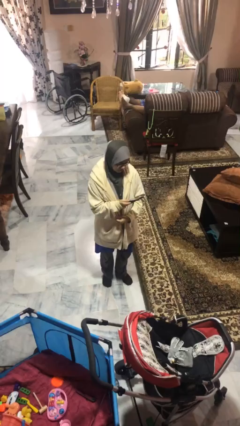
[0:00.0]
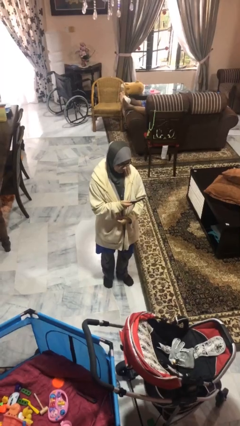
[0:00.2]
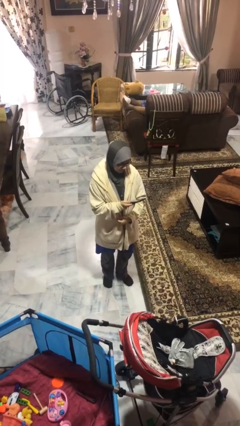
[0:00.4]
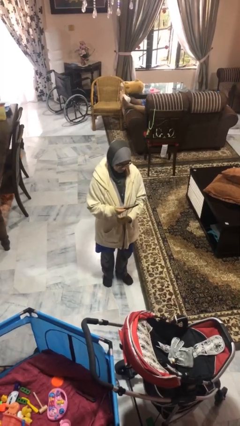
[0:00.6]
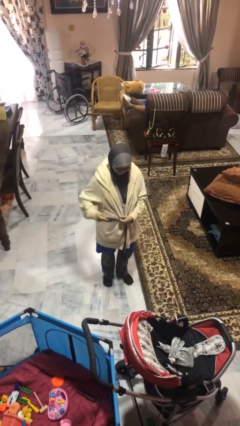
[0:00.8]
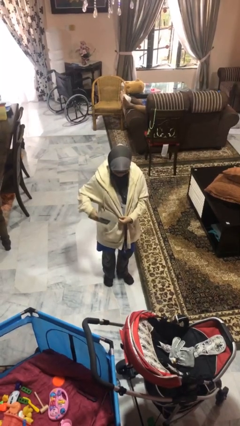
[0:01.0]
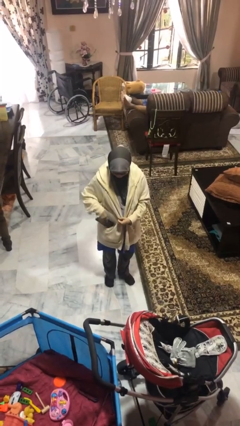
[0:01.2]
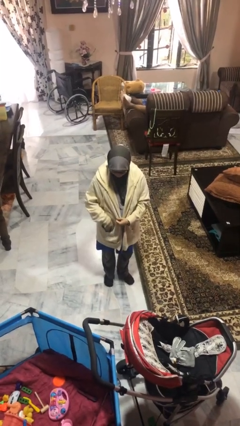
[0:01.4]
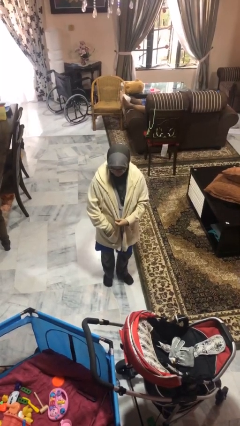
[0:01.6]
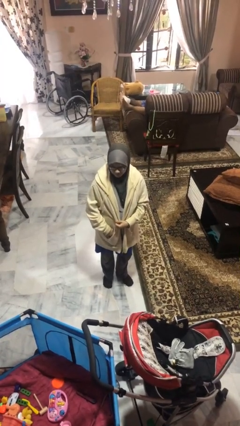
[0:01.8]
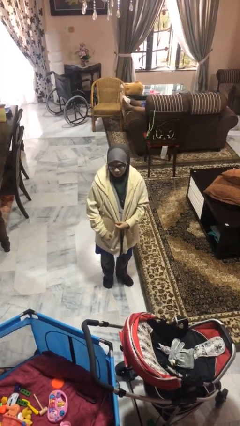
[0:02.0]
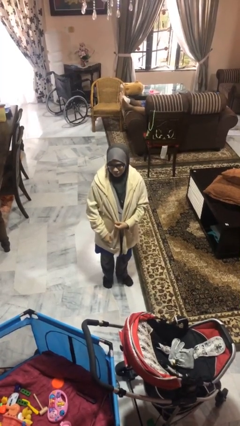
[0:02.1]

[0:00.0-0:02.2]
person puts phone into pocket

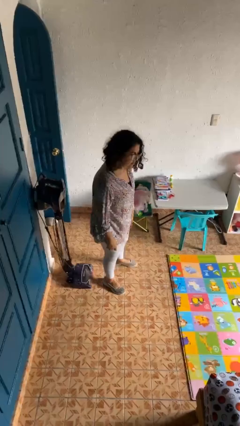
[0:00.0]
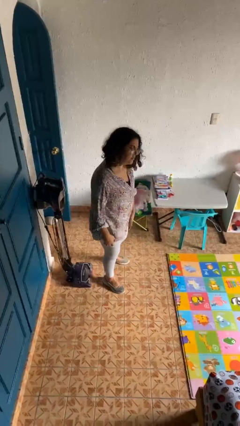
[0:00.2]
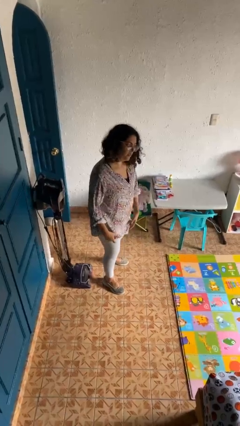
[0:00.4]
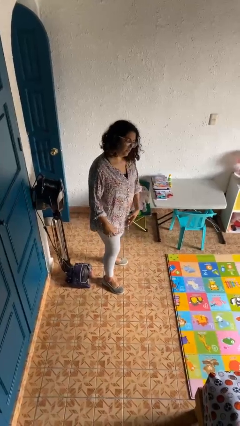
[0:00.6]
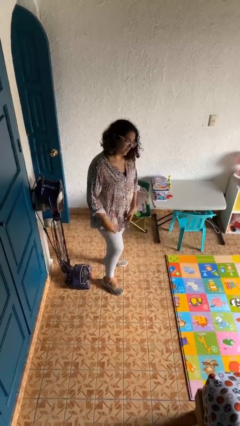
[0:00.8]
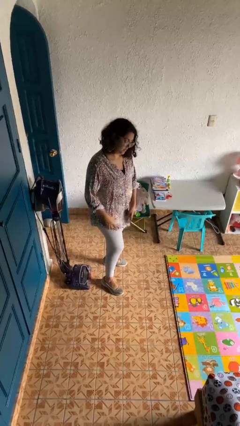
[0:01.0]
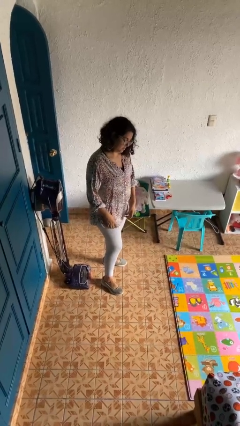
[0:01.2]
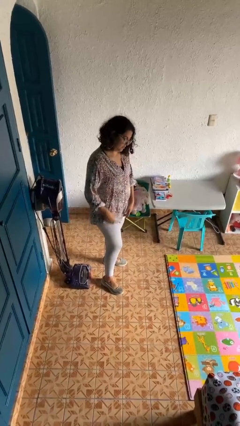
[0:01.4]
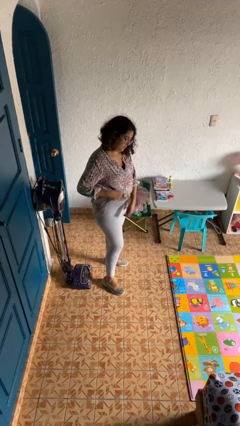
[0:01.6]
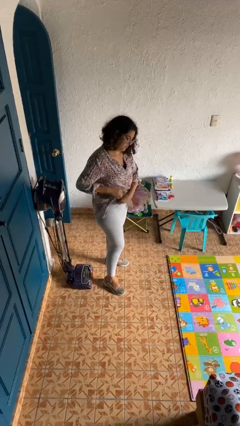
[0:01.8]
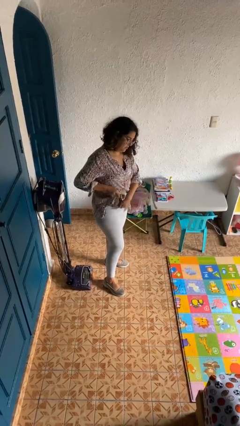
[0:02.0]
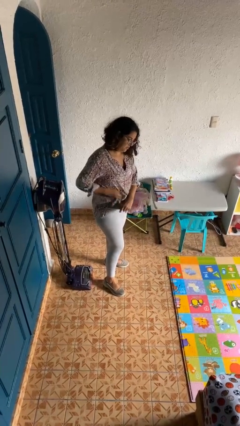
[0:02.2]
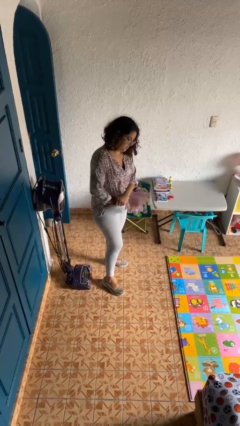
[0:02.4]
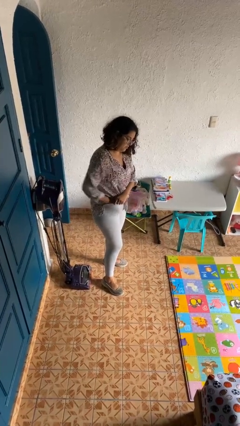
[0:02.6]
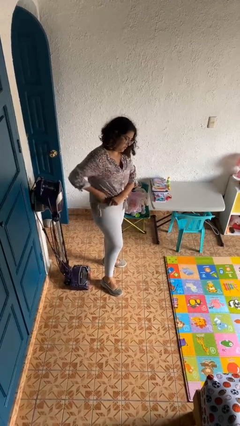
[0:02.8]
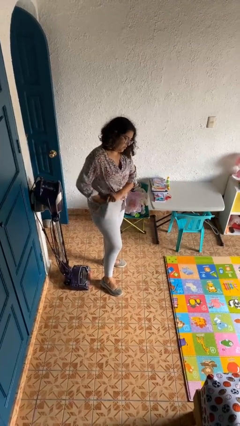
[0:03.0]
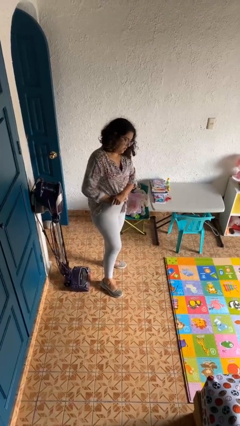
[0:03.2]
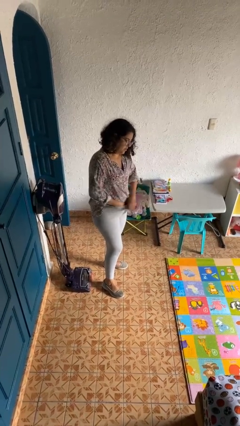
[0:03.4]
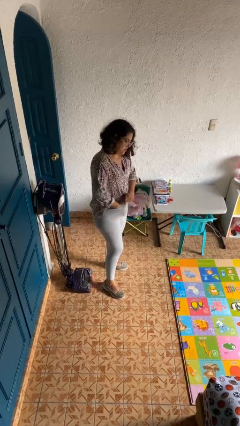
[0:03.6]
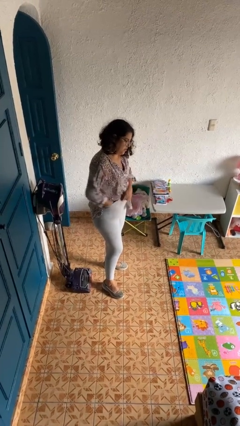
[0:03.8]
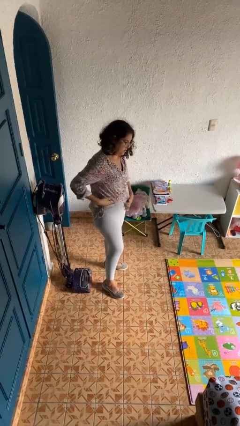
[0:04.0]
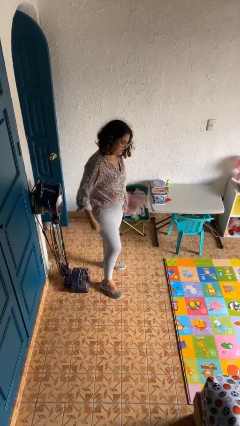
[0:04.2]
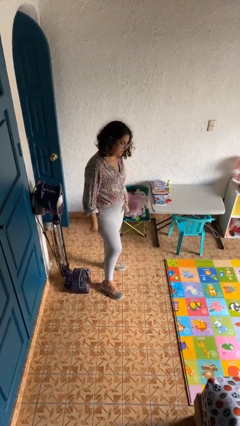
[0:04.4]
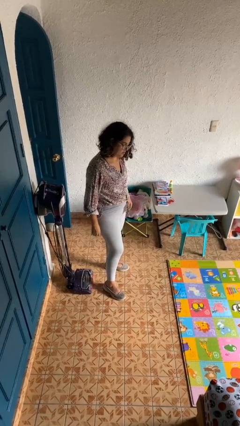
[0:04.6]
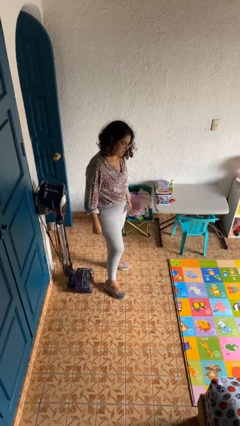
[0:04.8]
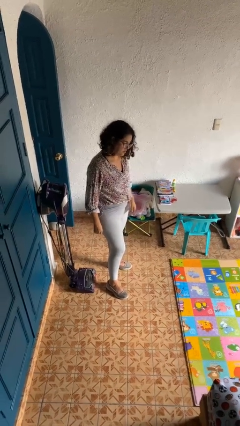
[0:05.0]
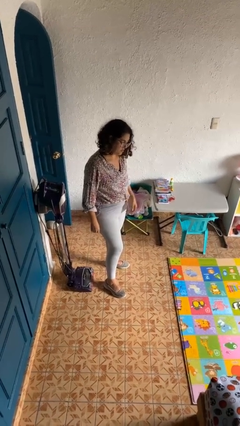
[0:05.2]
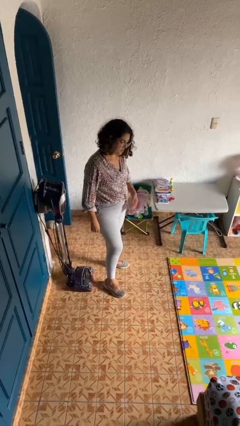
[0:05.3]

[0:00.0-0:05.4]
person tucks in shirt

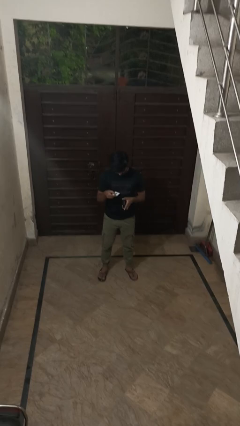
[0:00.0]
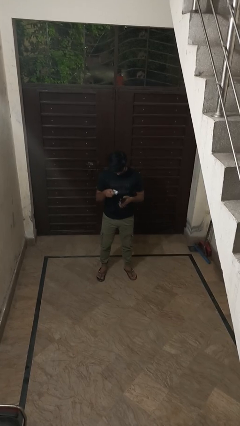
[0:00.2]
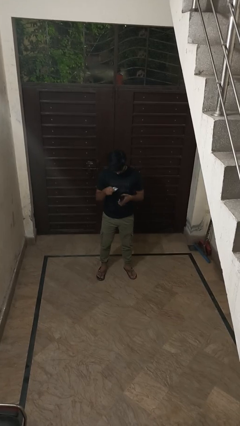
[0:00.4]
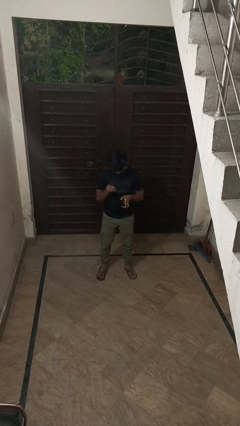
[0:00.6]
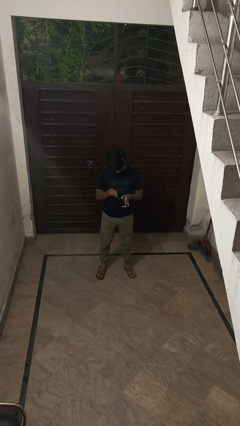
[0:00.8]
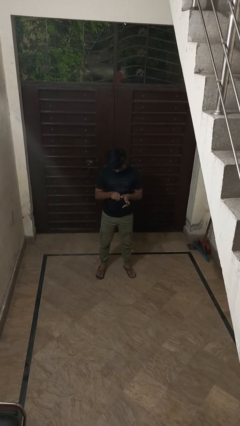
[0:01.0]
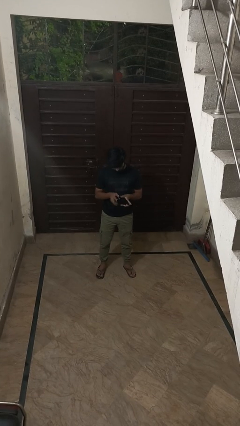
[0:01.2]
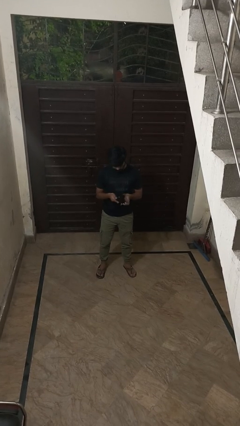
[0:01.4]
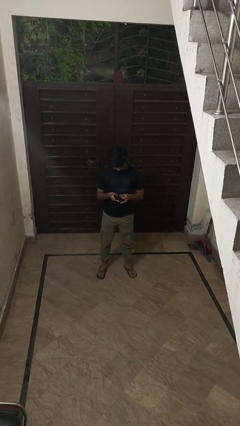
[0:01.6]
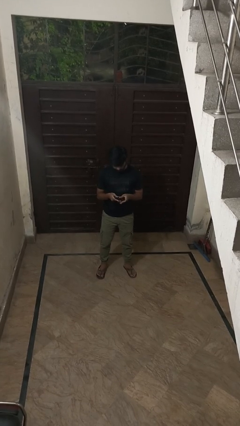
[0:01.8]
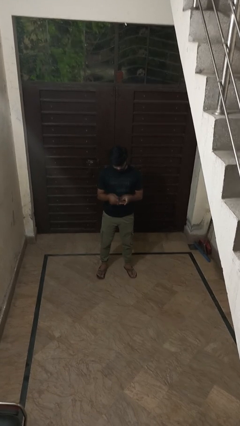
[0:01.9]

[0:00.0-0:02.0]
person puts object into purse

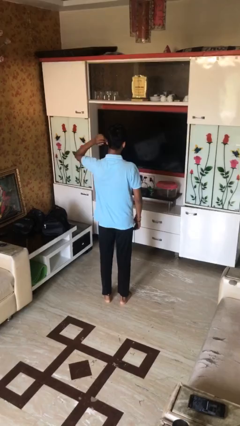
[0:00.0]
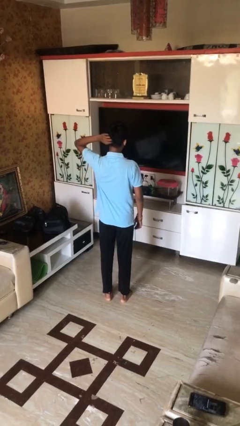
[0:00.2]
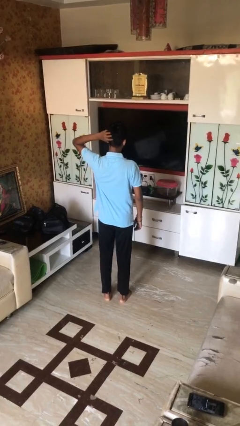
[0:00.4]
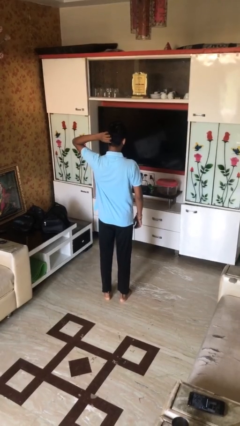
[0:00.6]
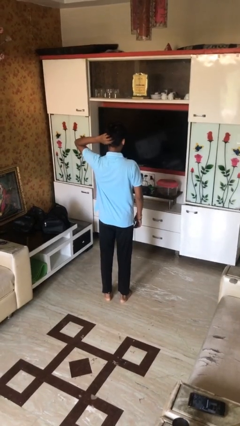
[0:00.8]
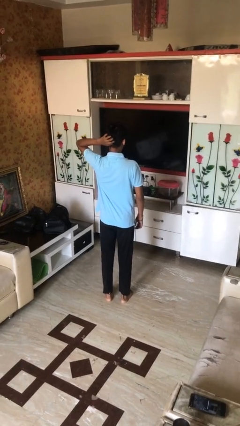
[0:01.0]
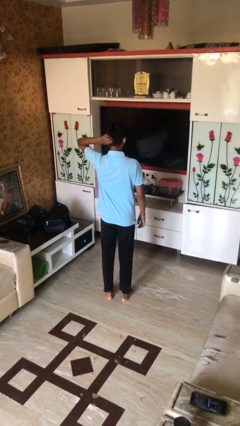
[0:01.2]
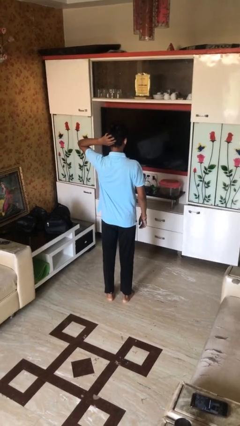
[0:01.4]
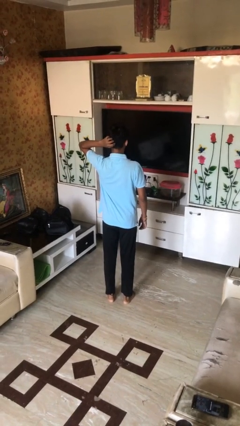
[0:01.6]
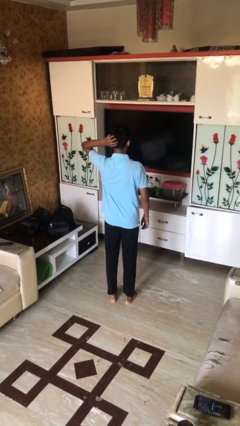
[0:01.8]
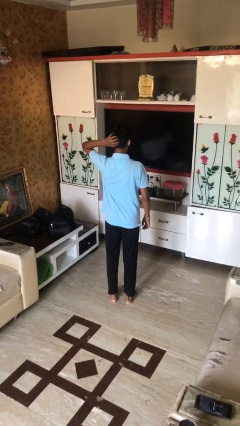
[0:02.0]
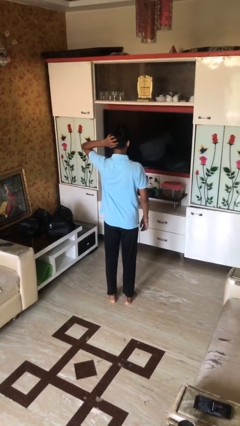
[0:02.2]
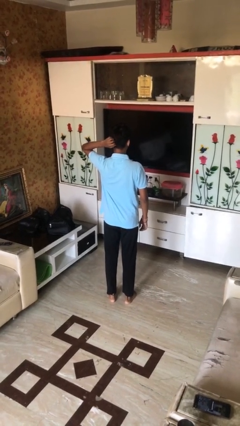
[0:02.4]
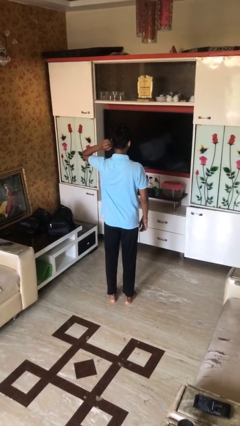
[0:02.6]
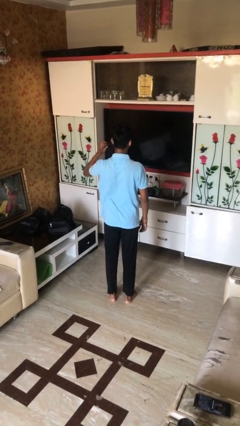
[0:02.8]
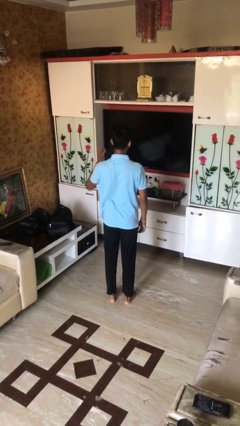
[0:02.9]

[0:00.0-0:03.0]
person scratches face

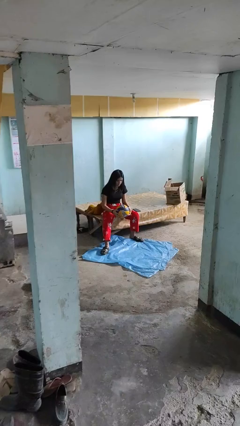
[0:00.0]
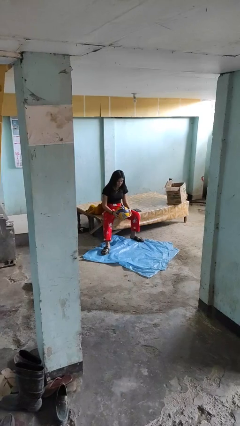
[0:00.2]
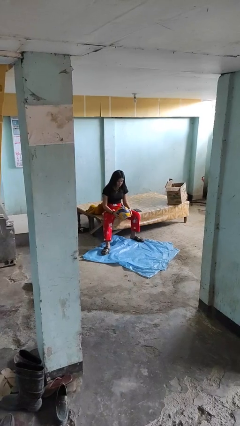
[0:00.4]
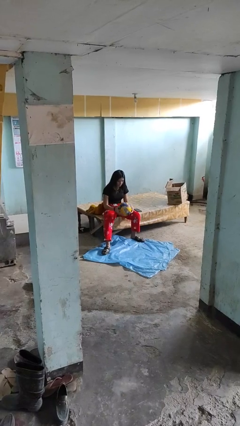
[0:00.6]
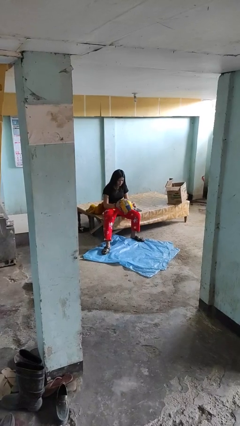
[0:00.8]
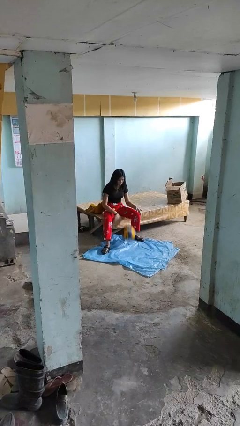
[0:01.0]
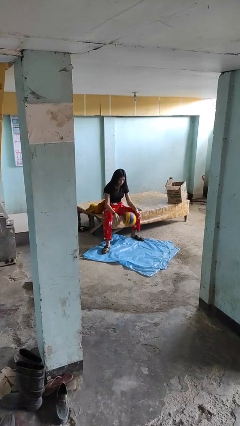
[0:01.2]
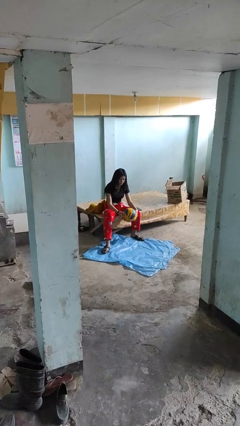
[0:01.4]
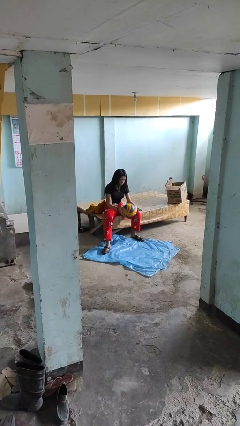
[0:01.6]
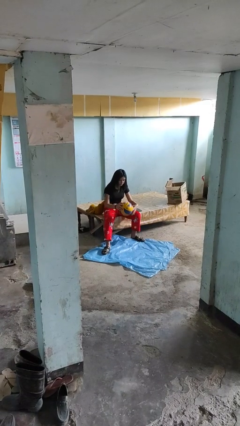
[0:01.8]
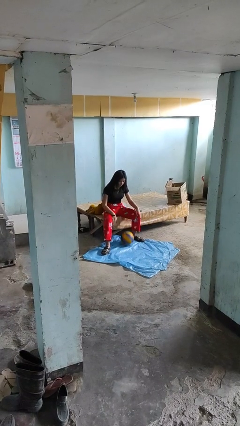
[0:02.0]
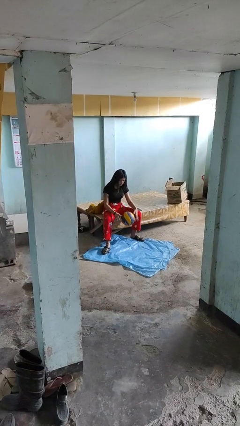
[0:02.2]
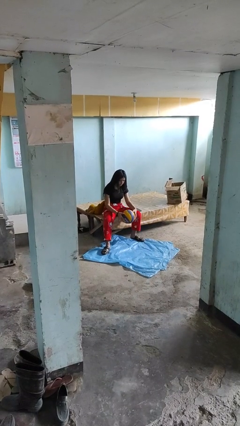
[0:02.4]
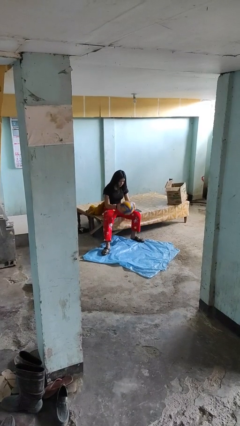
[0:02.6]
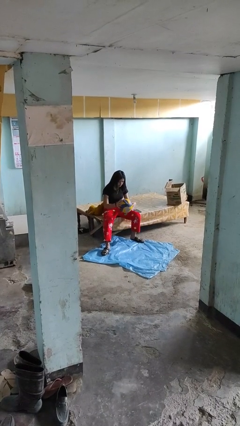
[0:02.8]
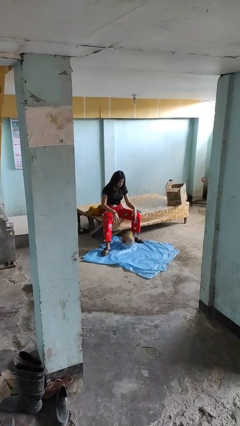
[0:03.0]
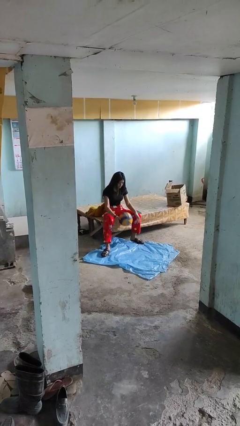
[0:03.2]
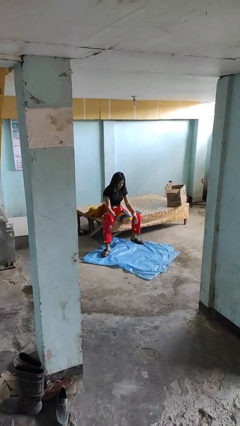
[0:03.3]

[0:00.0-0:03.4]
person bounces ball on floor

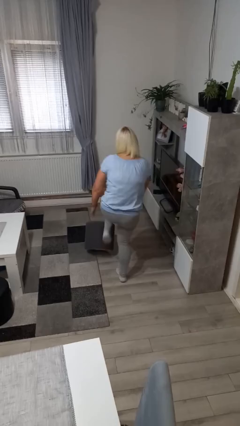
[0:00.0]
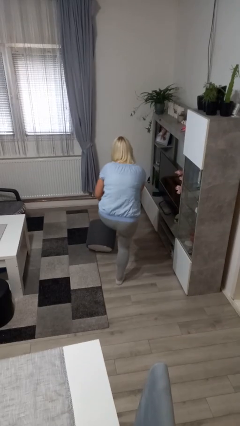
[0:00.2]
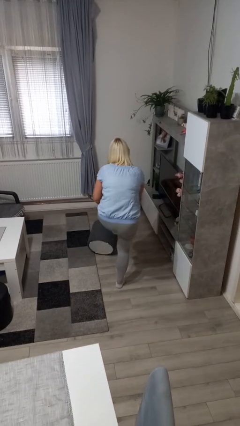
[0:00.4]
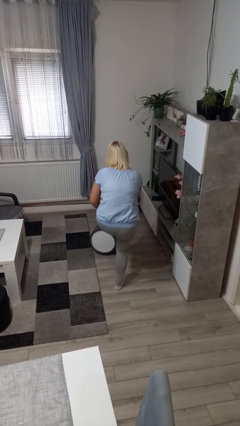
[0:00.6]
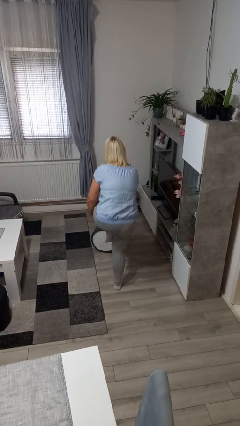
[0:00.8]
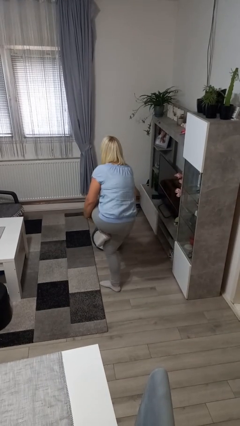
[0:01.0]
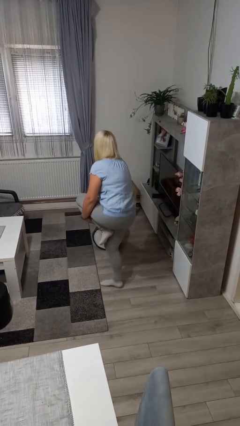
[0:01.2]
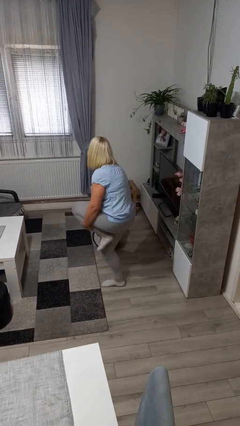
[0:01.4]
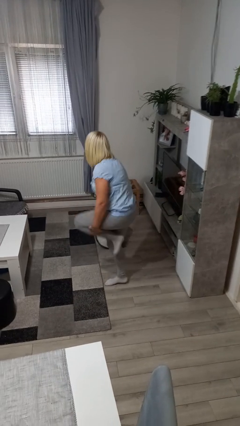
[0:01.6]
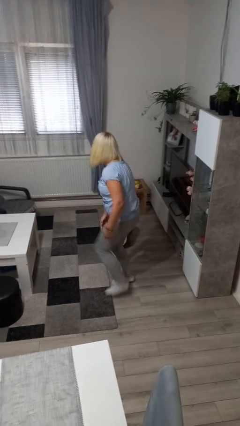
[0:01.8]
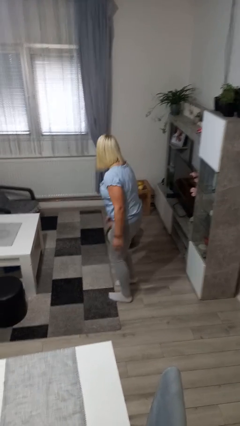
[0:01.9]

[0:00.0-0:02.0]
person stubs toe
